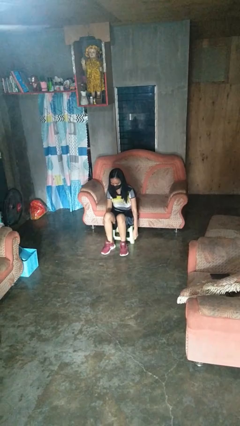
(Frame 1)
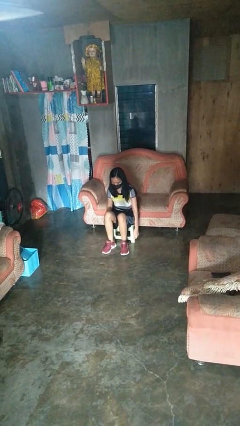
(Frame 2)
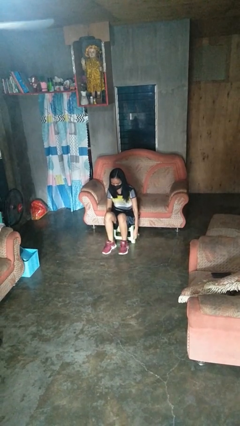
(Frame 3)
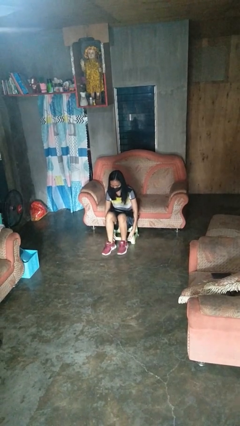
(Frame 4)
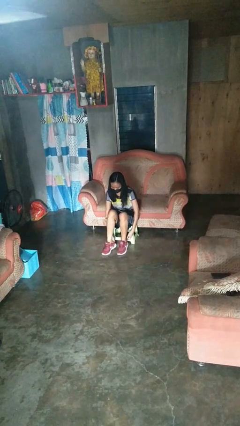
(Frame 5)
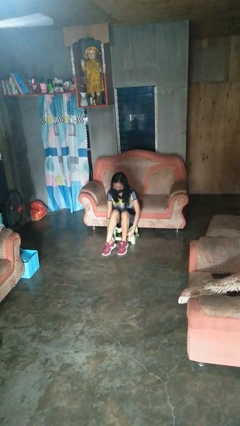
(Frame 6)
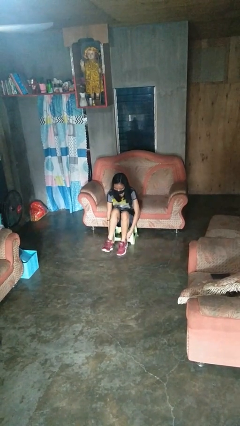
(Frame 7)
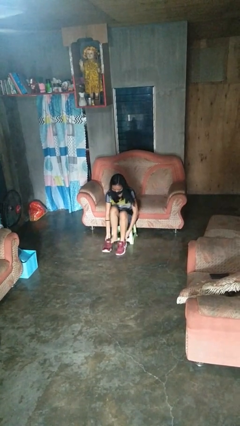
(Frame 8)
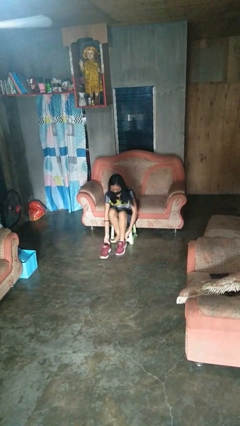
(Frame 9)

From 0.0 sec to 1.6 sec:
person takes off shoes

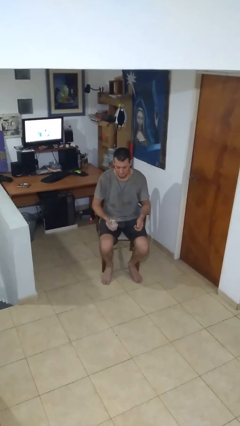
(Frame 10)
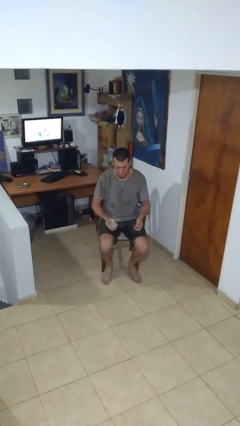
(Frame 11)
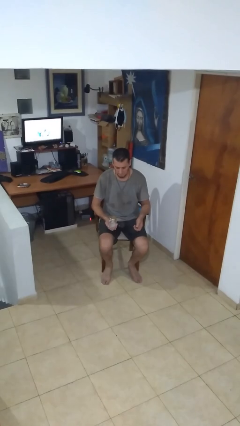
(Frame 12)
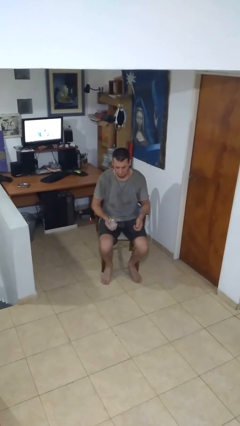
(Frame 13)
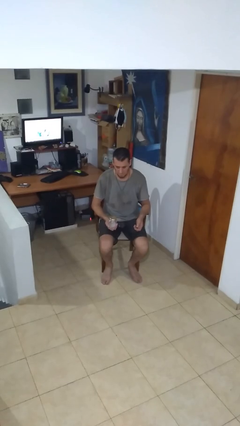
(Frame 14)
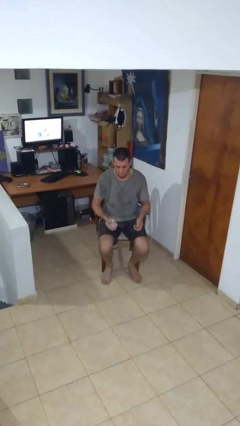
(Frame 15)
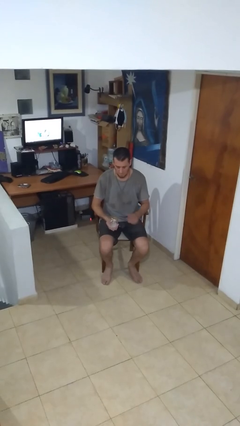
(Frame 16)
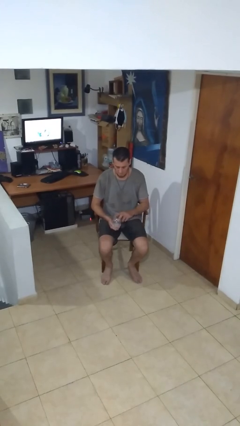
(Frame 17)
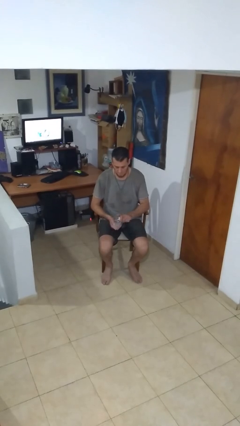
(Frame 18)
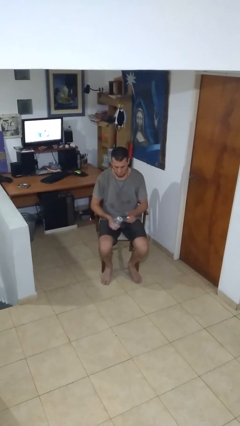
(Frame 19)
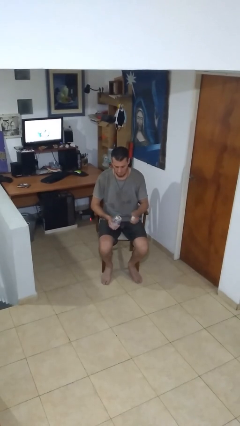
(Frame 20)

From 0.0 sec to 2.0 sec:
person opens jar

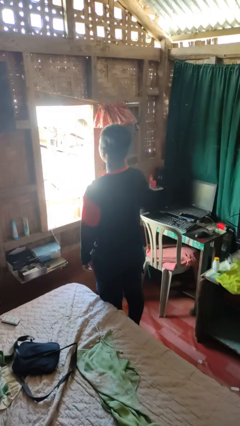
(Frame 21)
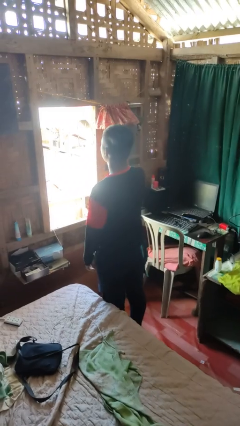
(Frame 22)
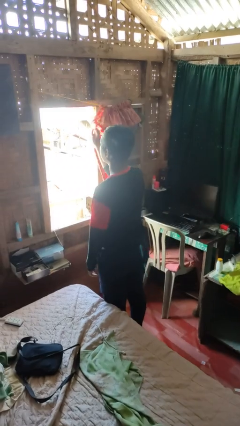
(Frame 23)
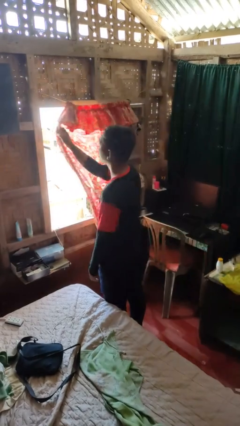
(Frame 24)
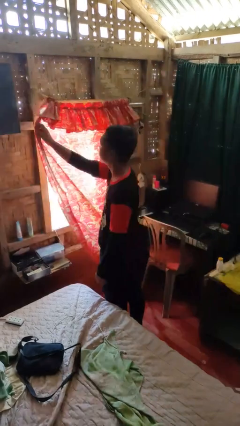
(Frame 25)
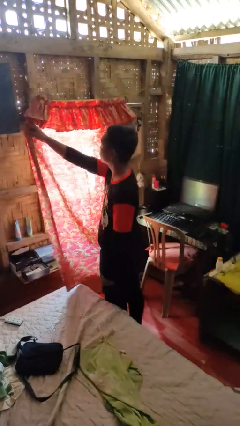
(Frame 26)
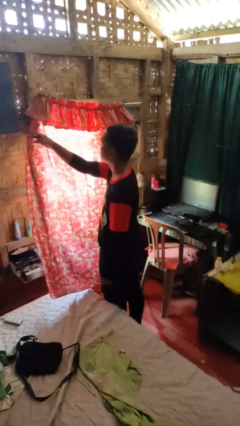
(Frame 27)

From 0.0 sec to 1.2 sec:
person closes curtains

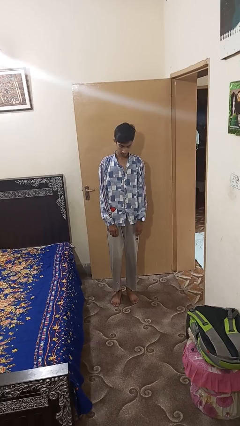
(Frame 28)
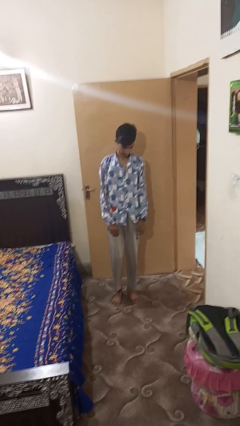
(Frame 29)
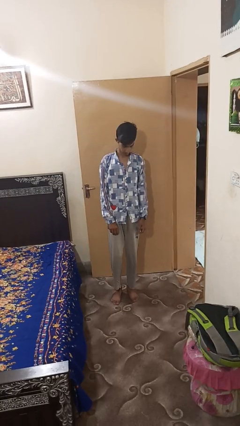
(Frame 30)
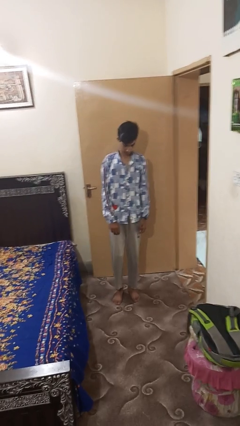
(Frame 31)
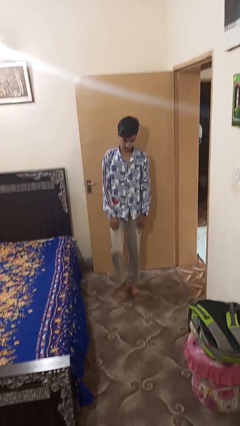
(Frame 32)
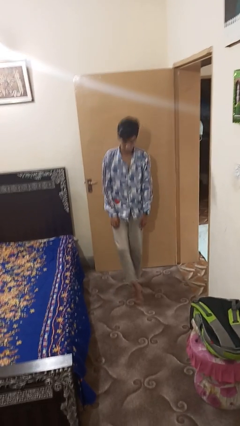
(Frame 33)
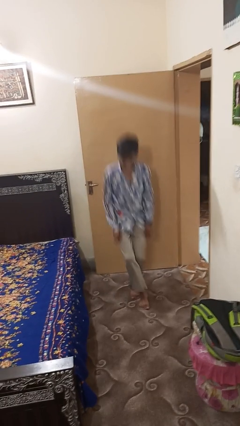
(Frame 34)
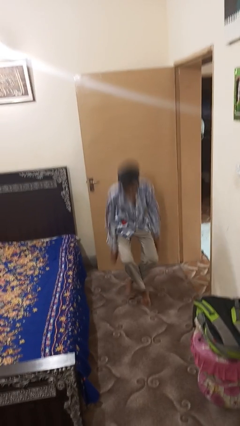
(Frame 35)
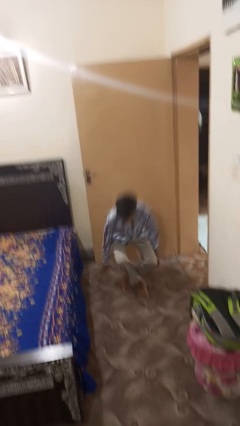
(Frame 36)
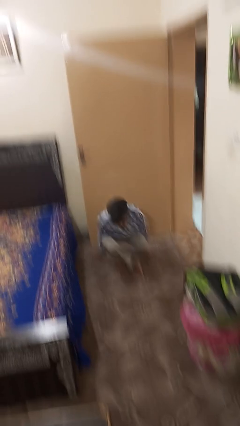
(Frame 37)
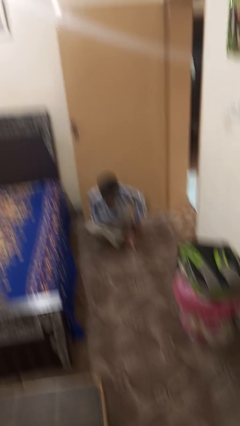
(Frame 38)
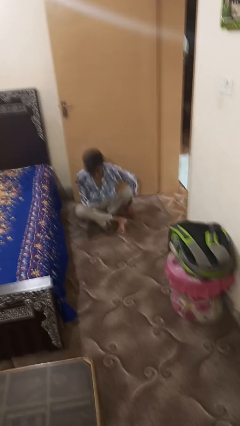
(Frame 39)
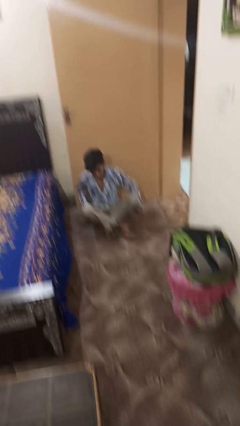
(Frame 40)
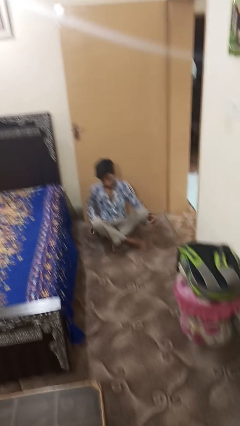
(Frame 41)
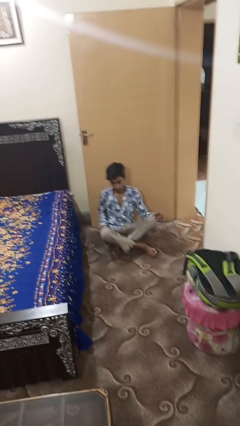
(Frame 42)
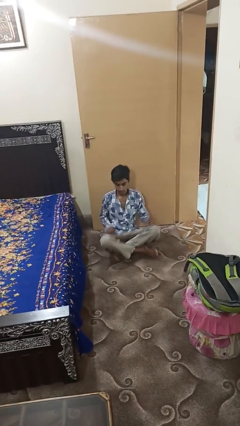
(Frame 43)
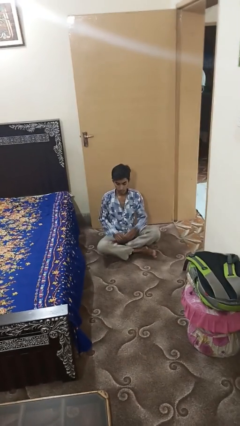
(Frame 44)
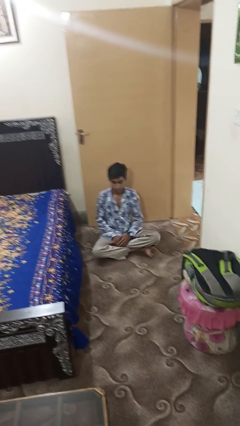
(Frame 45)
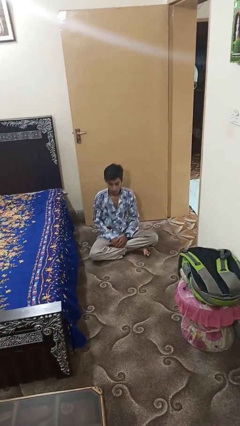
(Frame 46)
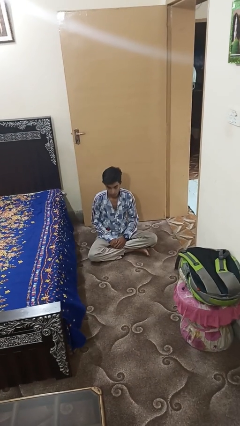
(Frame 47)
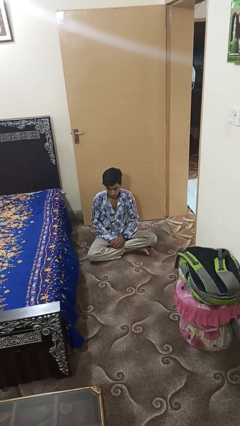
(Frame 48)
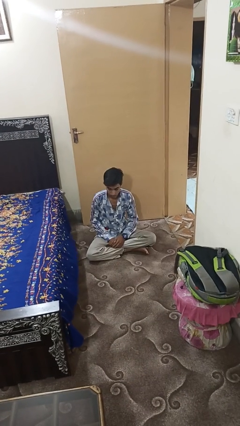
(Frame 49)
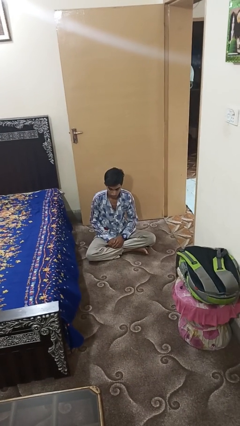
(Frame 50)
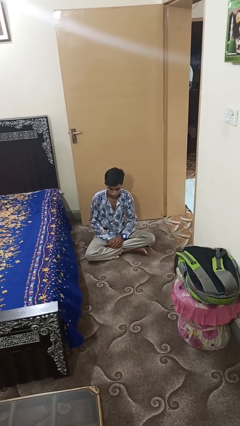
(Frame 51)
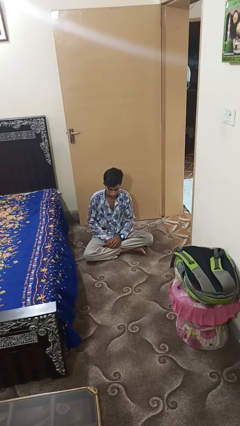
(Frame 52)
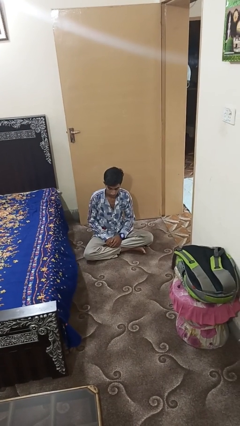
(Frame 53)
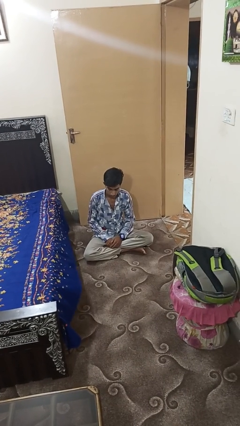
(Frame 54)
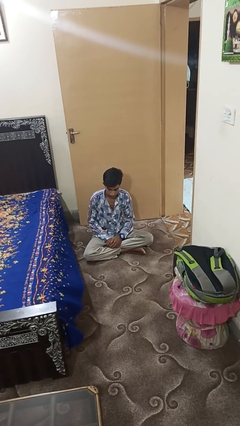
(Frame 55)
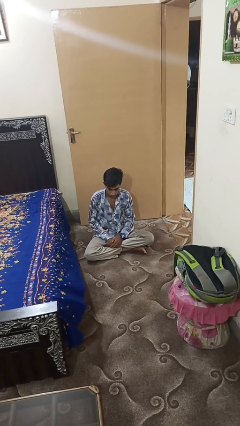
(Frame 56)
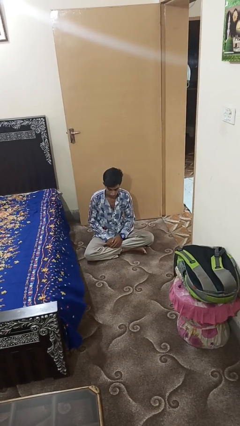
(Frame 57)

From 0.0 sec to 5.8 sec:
person sits crisscross

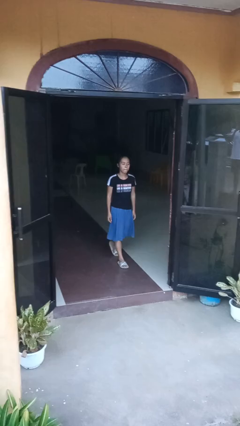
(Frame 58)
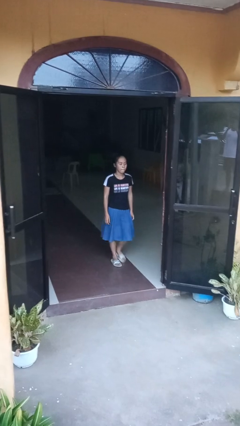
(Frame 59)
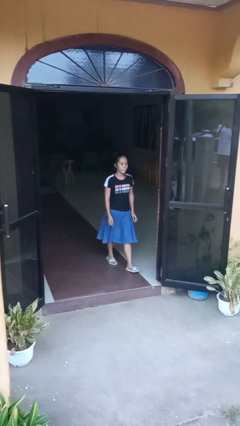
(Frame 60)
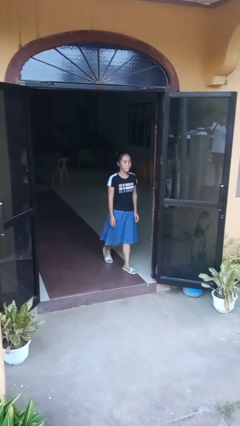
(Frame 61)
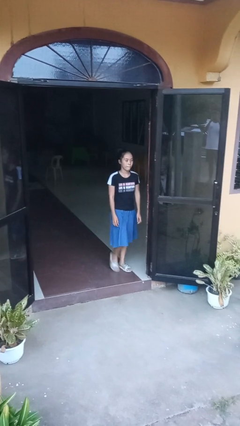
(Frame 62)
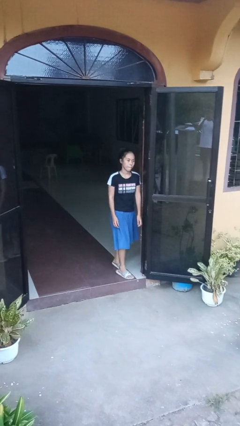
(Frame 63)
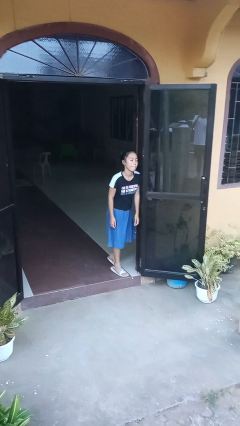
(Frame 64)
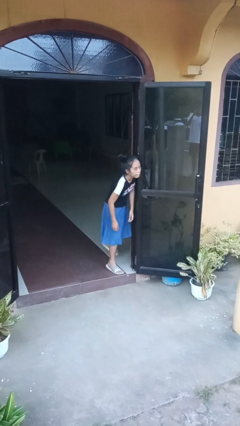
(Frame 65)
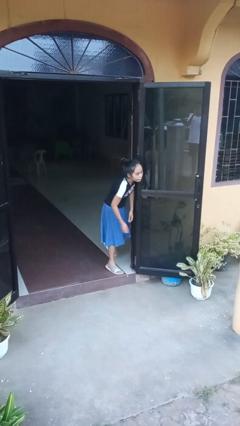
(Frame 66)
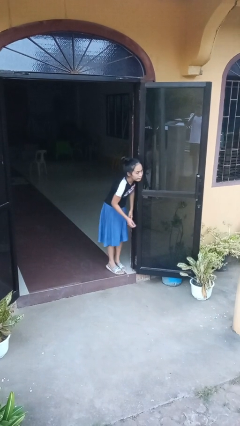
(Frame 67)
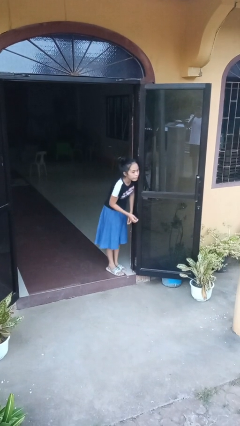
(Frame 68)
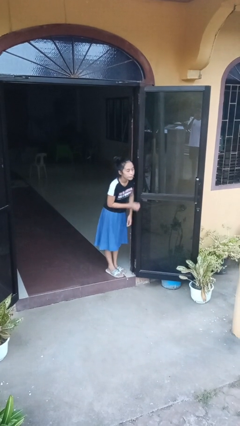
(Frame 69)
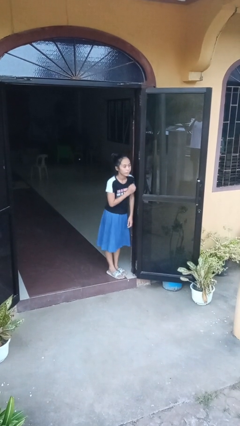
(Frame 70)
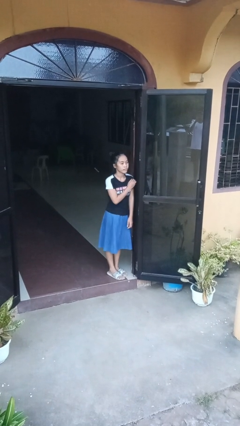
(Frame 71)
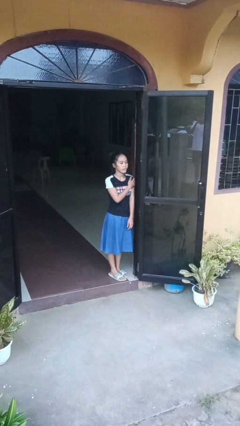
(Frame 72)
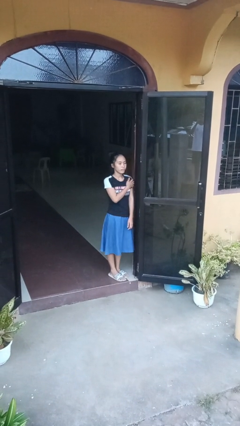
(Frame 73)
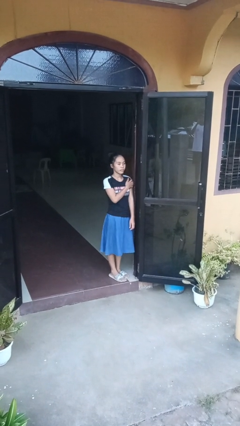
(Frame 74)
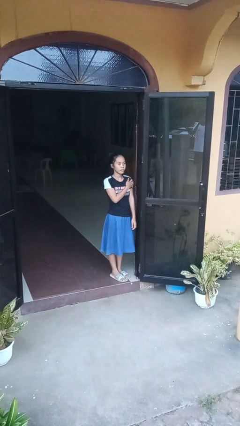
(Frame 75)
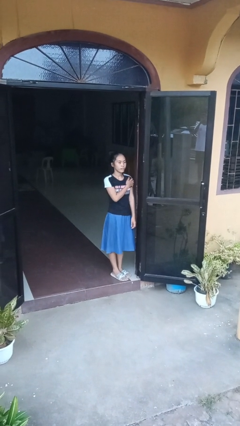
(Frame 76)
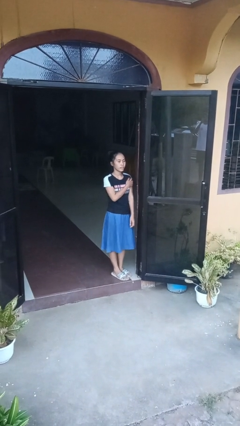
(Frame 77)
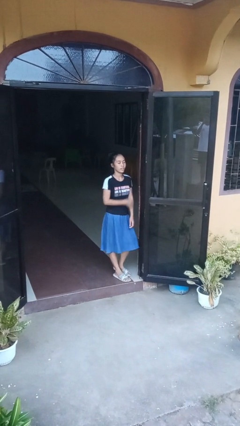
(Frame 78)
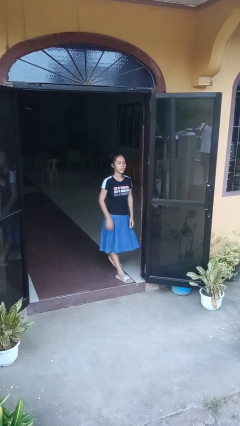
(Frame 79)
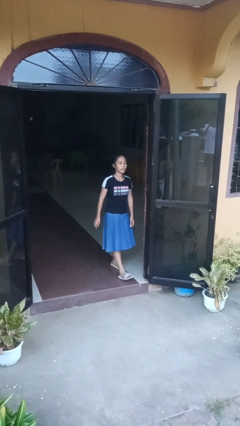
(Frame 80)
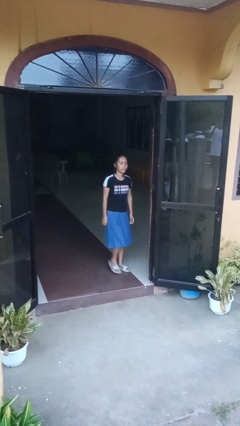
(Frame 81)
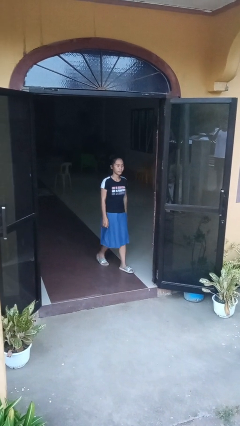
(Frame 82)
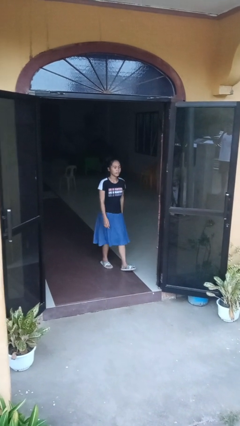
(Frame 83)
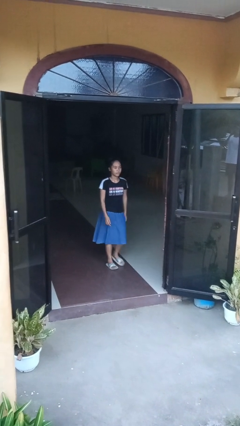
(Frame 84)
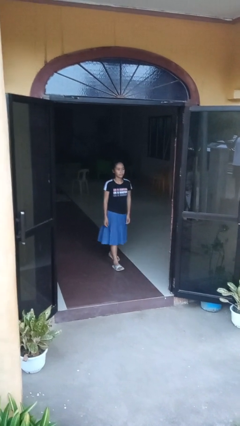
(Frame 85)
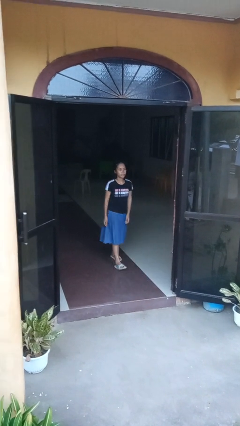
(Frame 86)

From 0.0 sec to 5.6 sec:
person bumps into wall

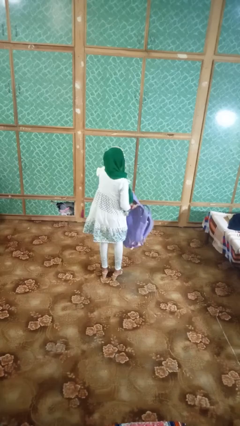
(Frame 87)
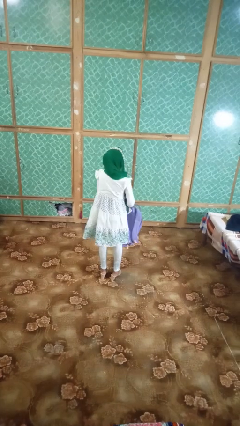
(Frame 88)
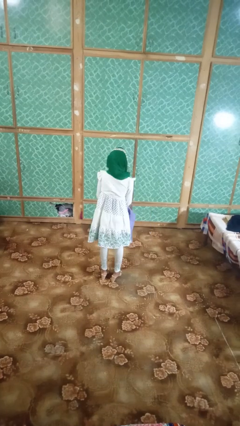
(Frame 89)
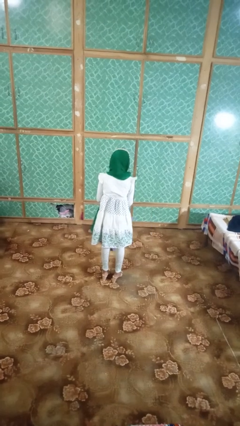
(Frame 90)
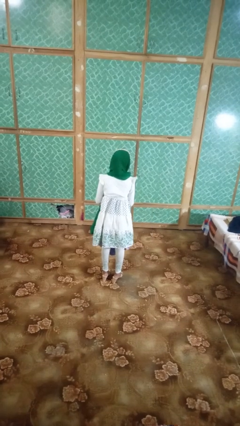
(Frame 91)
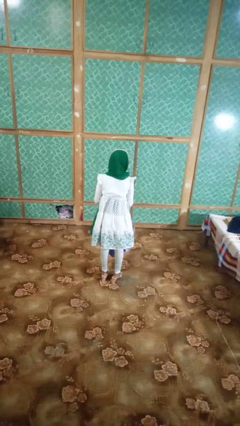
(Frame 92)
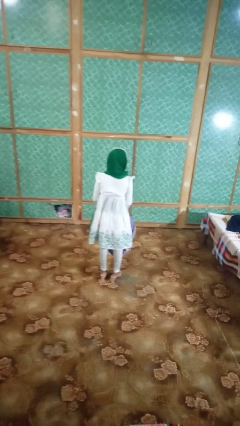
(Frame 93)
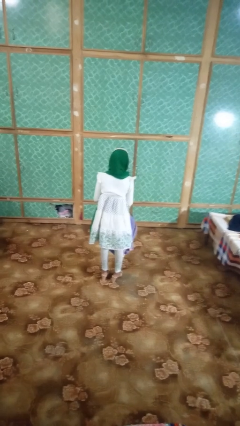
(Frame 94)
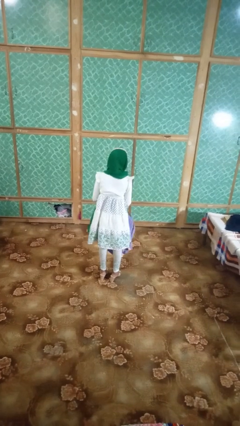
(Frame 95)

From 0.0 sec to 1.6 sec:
person takes off backpack
